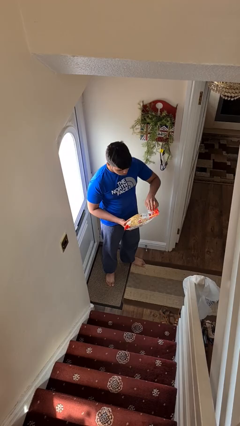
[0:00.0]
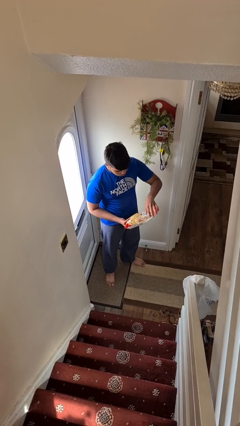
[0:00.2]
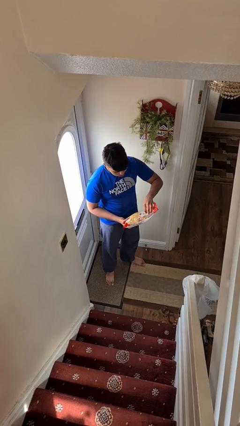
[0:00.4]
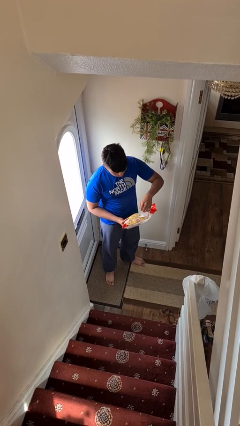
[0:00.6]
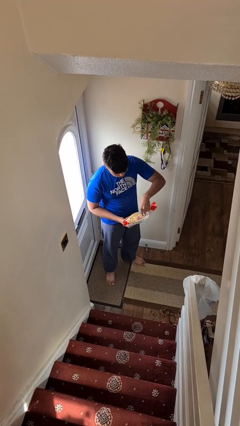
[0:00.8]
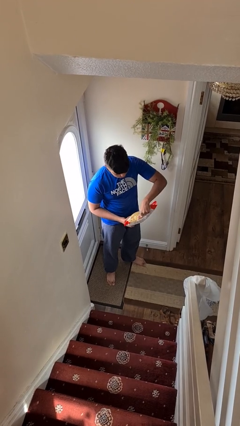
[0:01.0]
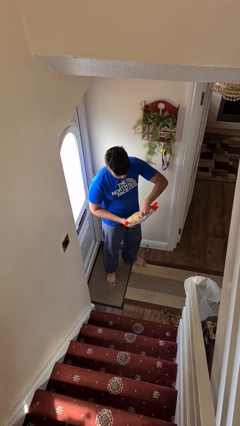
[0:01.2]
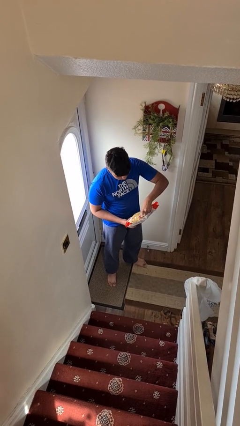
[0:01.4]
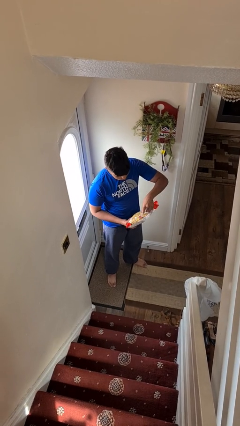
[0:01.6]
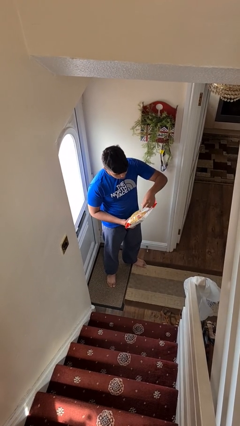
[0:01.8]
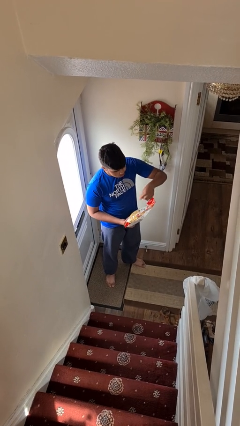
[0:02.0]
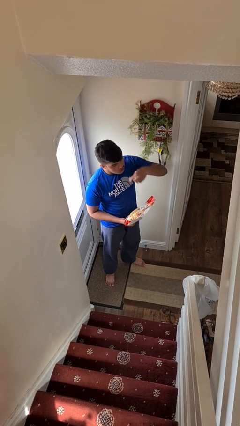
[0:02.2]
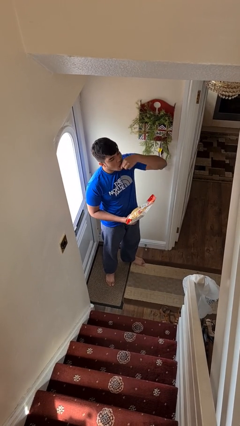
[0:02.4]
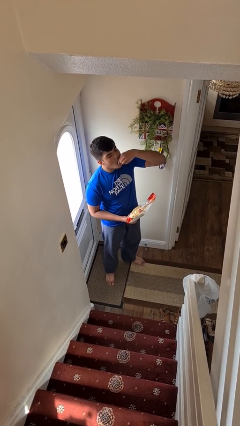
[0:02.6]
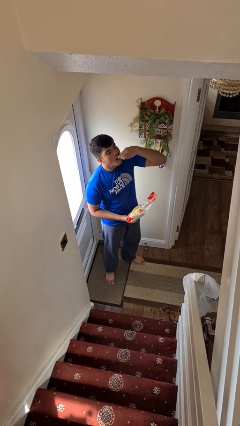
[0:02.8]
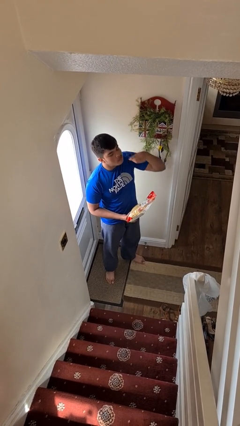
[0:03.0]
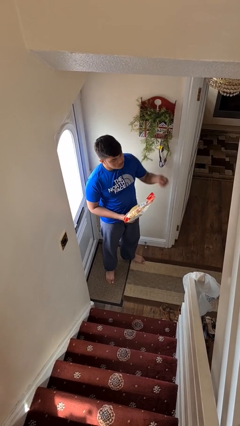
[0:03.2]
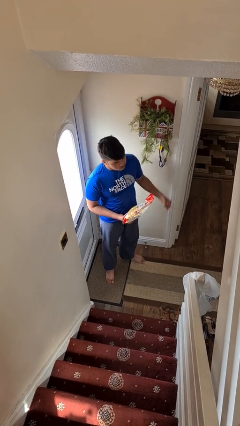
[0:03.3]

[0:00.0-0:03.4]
person eats snack from bag

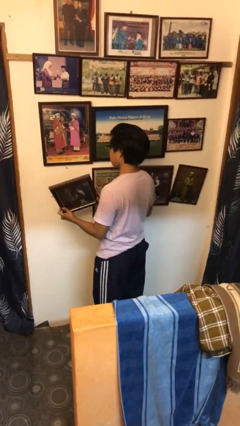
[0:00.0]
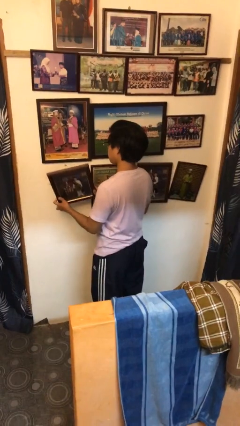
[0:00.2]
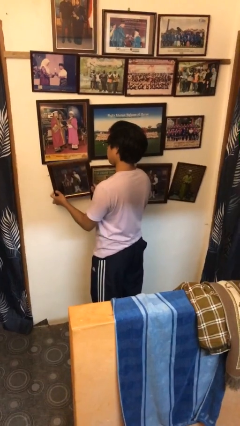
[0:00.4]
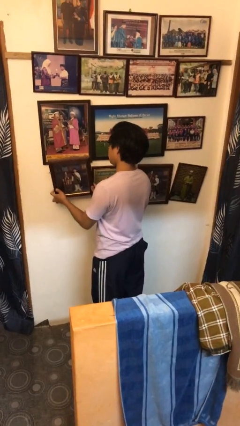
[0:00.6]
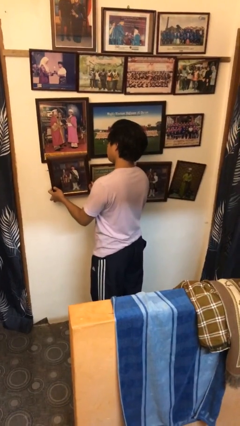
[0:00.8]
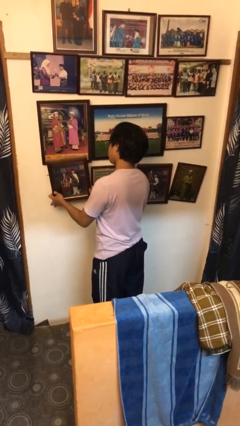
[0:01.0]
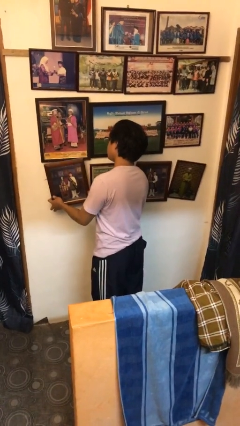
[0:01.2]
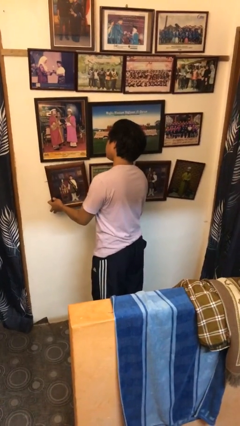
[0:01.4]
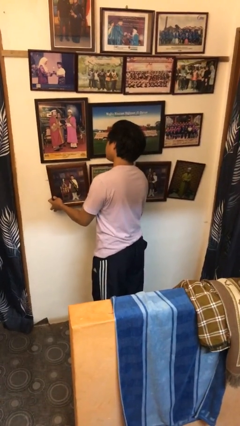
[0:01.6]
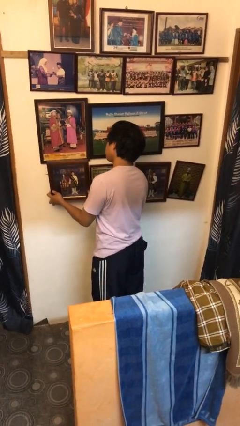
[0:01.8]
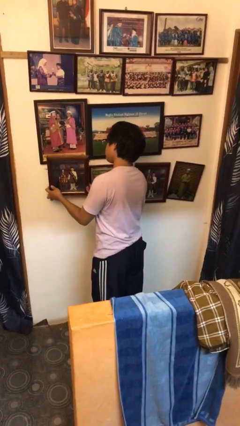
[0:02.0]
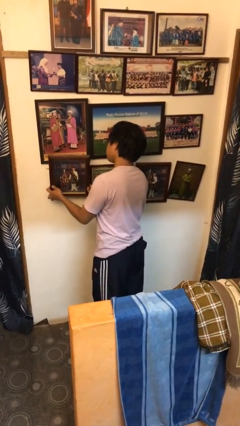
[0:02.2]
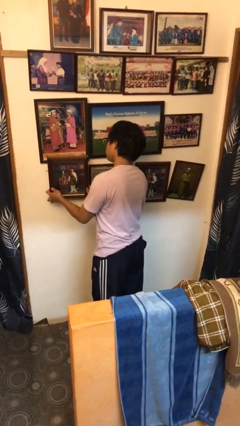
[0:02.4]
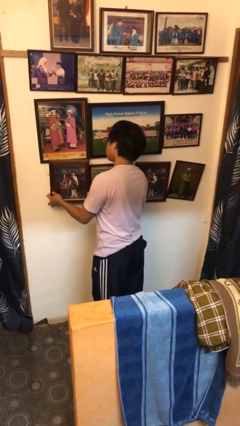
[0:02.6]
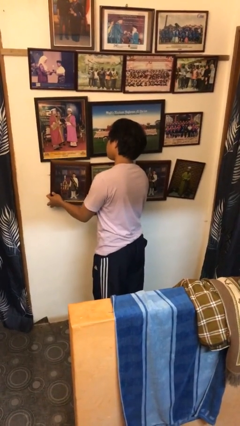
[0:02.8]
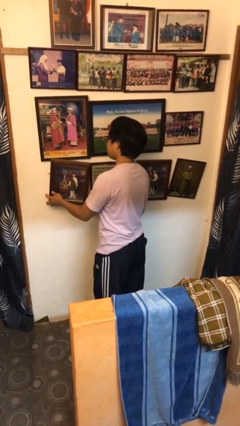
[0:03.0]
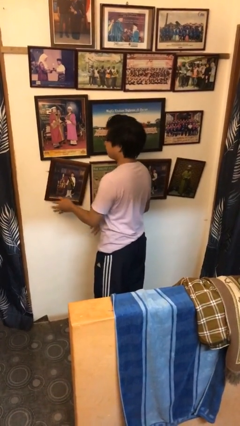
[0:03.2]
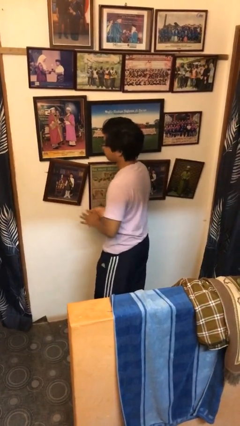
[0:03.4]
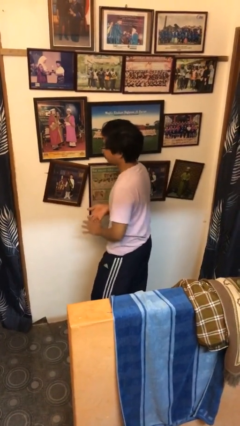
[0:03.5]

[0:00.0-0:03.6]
person puts up picture frame

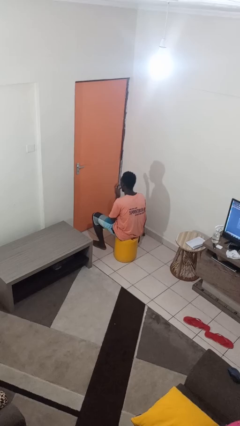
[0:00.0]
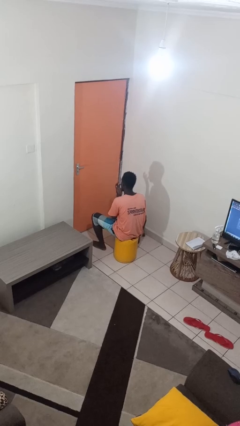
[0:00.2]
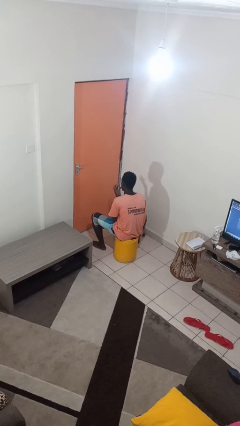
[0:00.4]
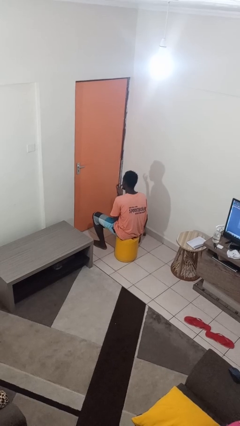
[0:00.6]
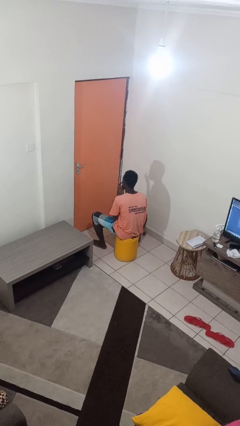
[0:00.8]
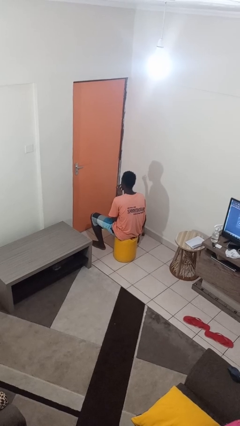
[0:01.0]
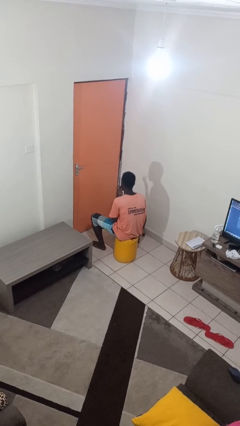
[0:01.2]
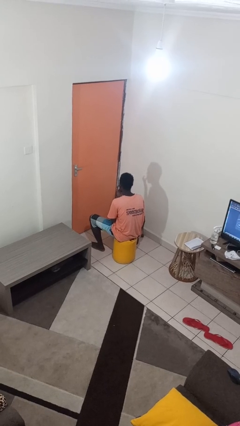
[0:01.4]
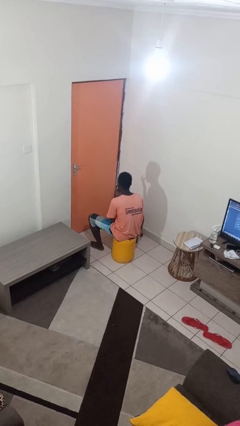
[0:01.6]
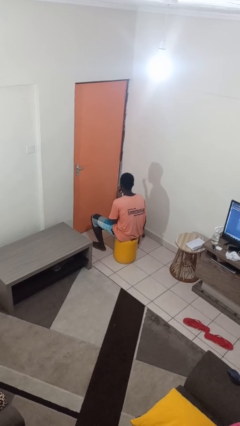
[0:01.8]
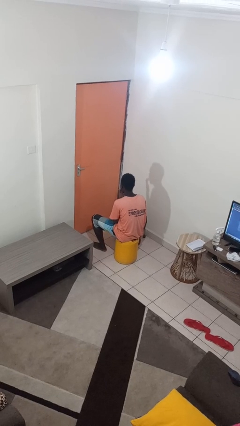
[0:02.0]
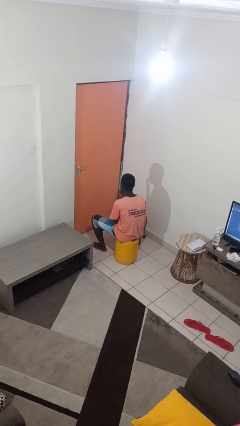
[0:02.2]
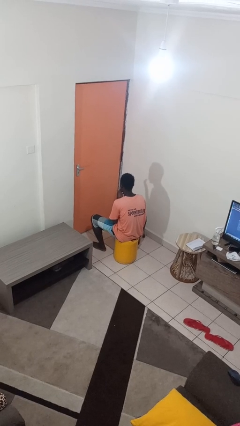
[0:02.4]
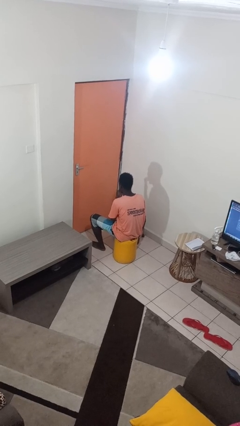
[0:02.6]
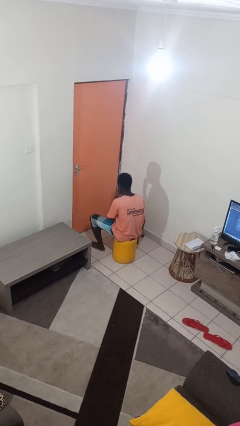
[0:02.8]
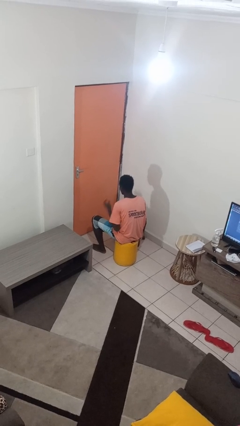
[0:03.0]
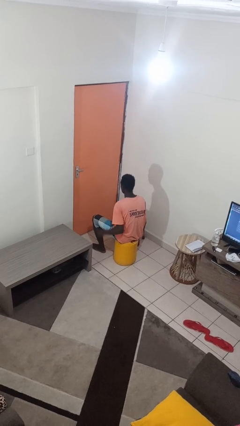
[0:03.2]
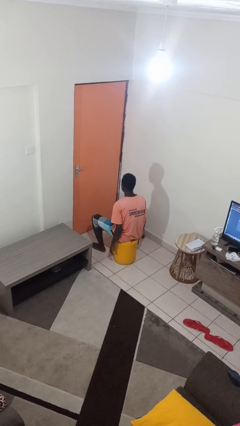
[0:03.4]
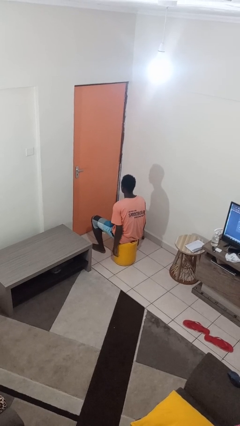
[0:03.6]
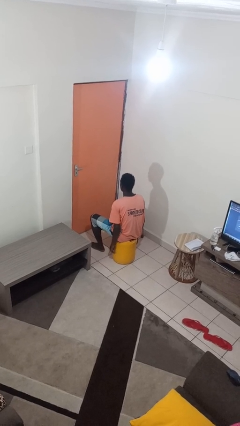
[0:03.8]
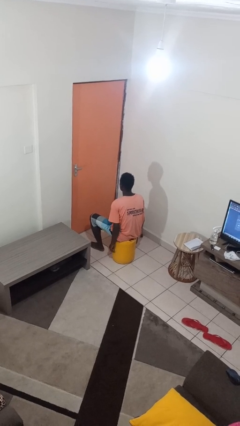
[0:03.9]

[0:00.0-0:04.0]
person licks fingers

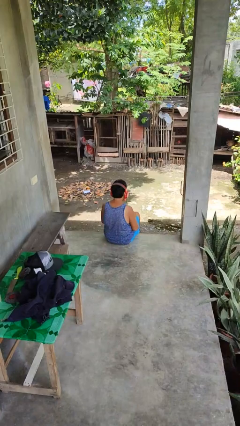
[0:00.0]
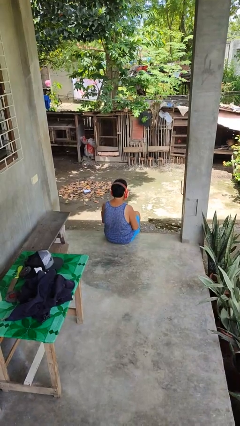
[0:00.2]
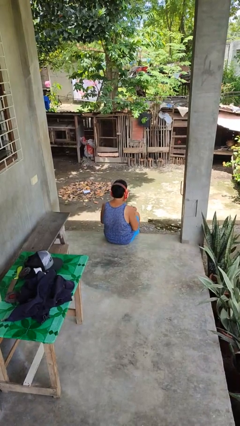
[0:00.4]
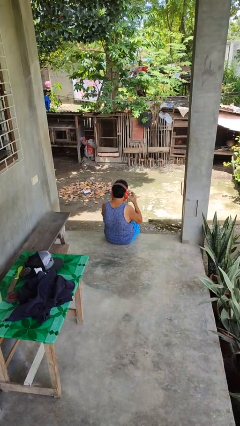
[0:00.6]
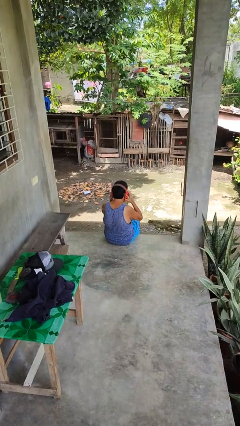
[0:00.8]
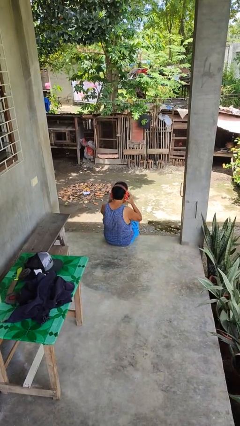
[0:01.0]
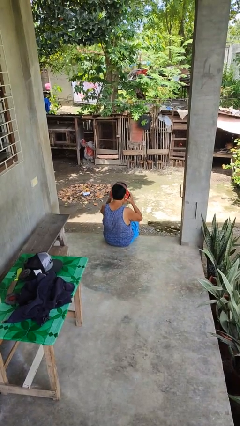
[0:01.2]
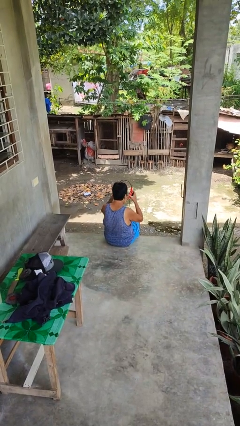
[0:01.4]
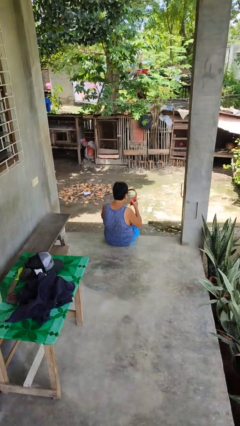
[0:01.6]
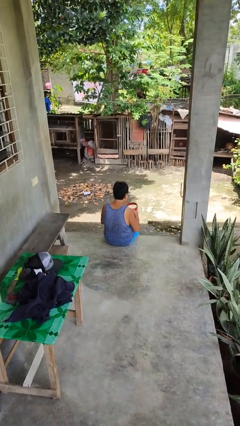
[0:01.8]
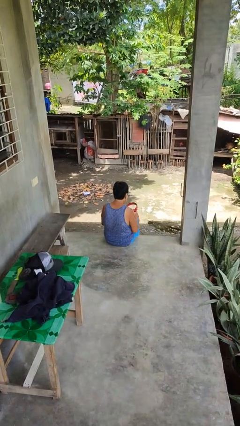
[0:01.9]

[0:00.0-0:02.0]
person takes off headphones

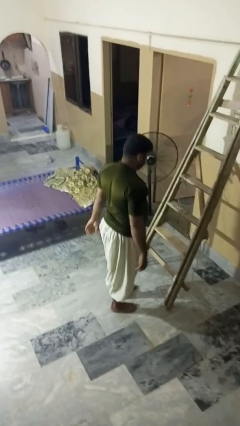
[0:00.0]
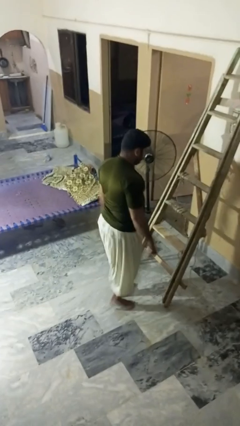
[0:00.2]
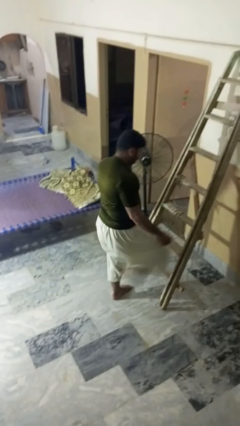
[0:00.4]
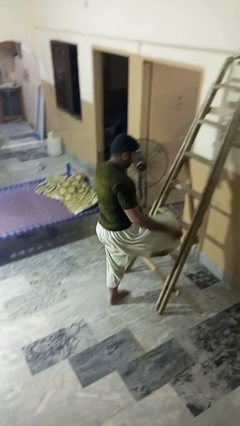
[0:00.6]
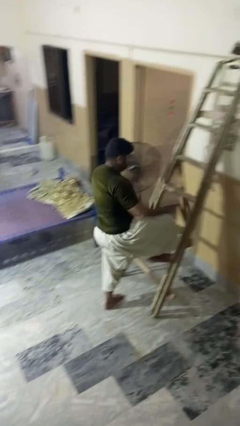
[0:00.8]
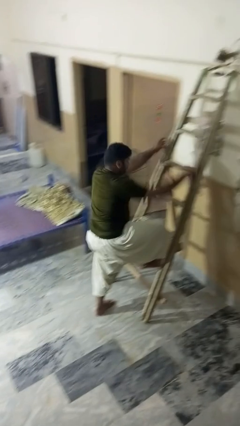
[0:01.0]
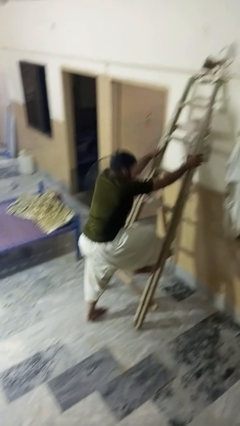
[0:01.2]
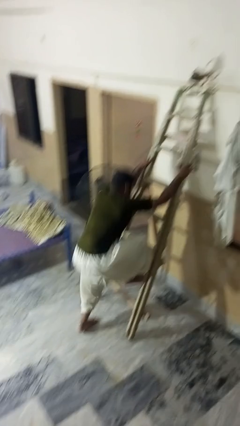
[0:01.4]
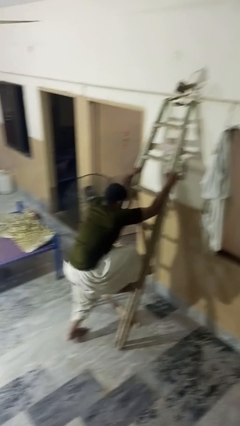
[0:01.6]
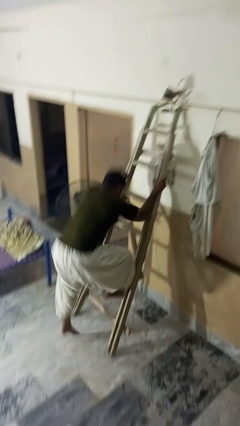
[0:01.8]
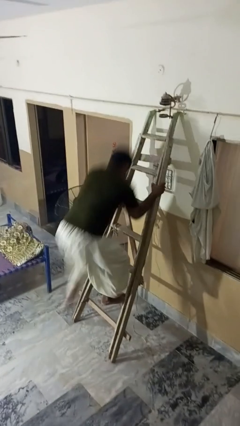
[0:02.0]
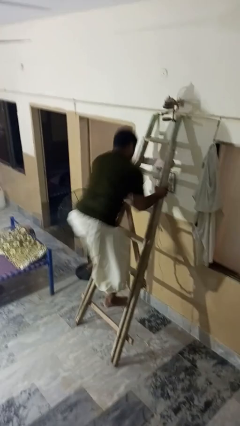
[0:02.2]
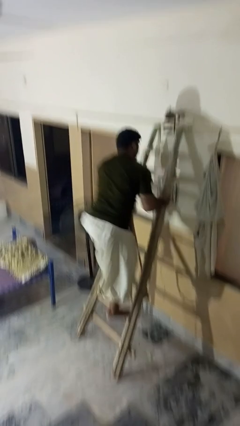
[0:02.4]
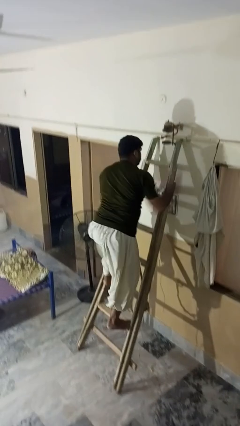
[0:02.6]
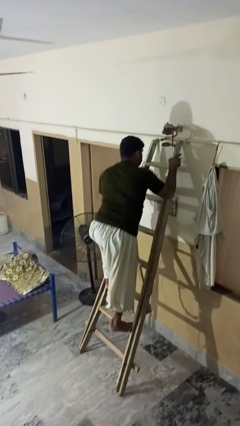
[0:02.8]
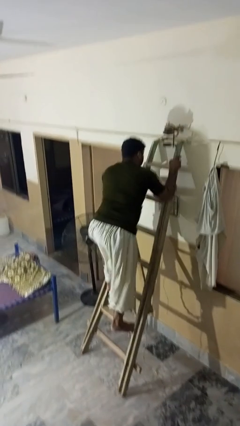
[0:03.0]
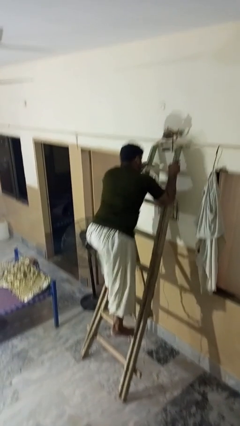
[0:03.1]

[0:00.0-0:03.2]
person climbs up ladder

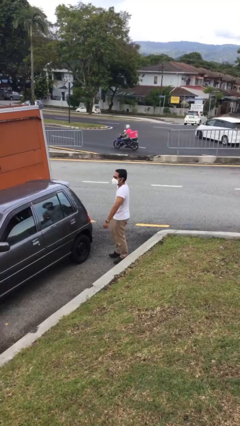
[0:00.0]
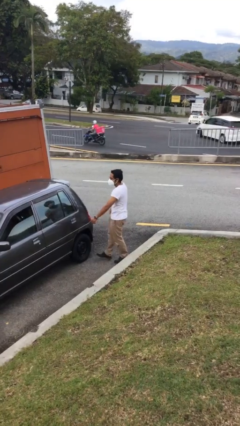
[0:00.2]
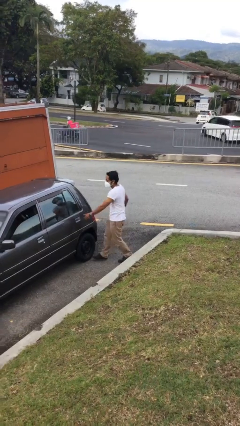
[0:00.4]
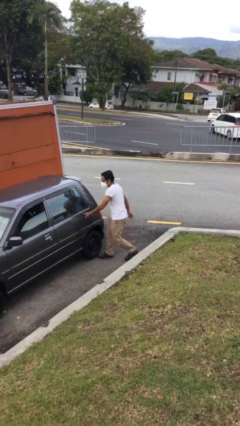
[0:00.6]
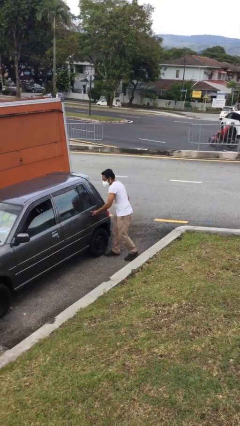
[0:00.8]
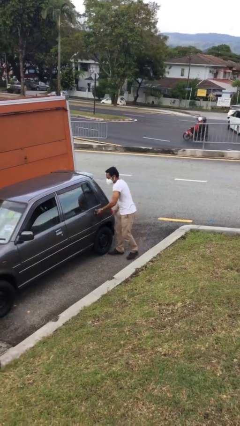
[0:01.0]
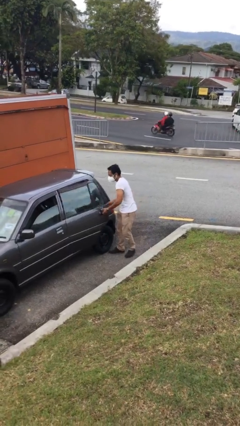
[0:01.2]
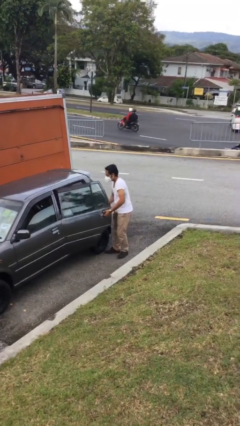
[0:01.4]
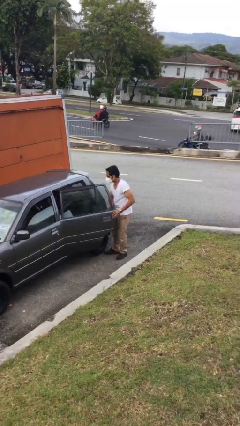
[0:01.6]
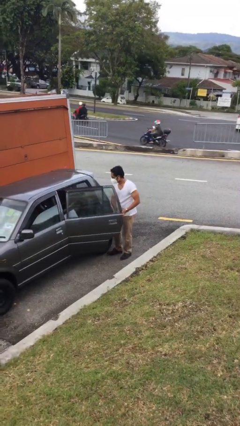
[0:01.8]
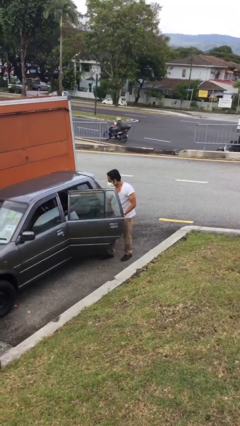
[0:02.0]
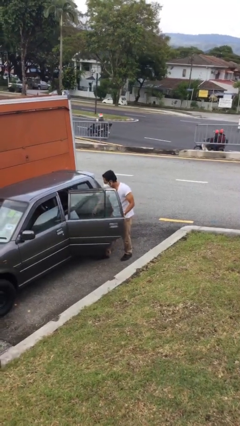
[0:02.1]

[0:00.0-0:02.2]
person opens car door
